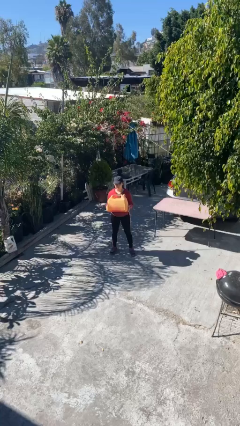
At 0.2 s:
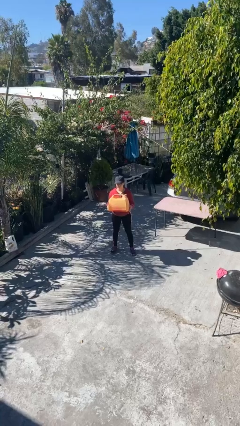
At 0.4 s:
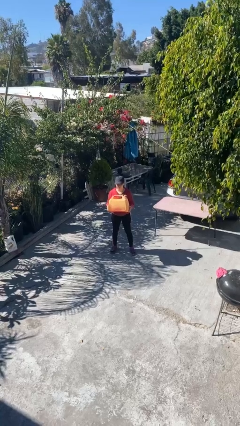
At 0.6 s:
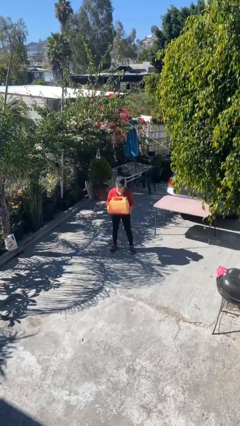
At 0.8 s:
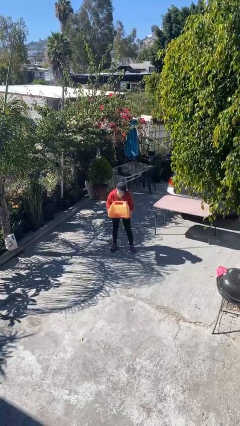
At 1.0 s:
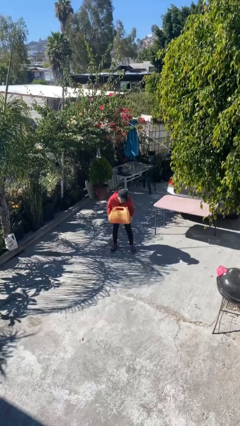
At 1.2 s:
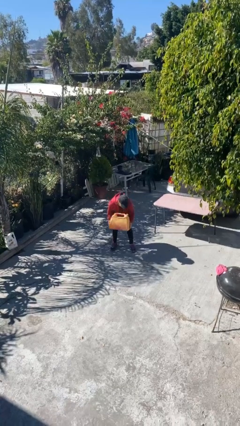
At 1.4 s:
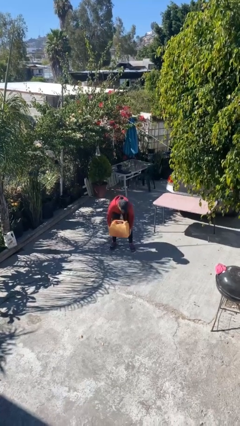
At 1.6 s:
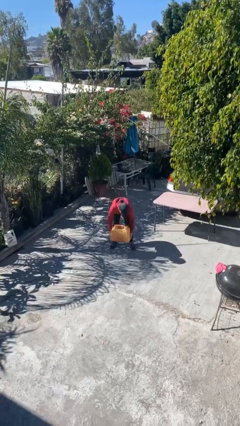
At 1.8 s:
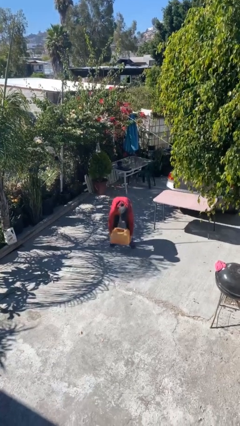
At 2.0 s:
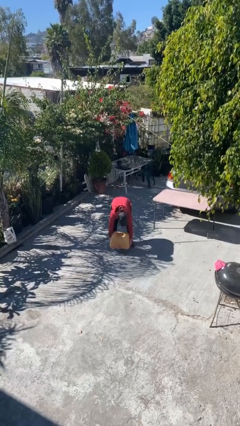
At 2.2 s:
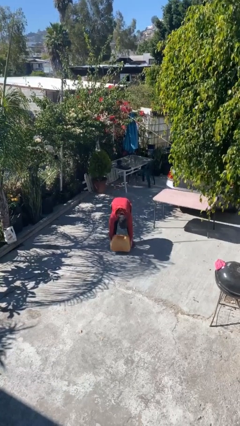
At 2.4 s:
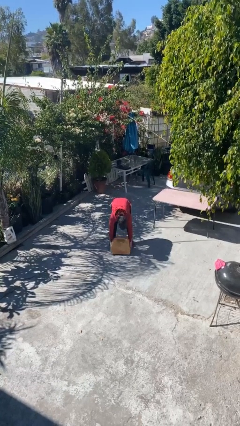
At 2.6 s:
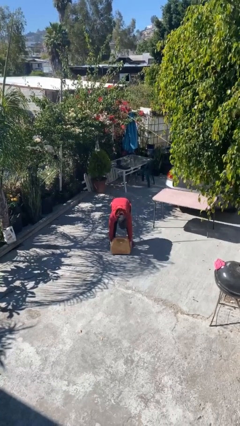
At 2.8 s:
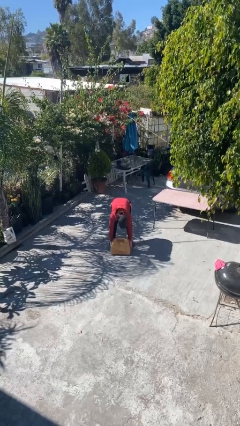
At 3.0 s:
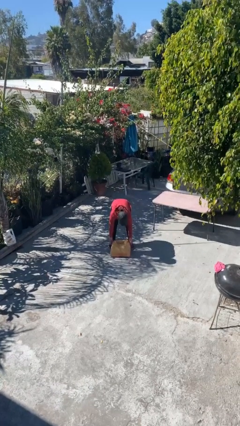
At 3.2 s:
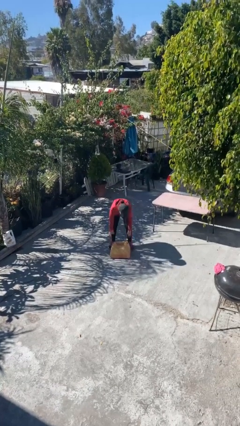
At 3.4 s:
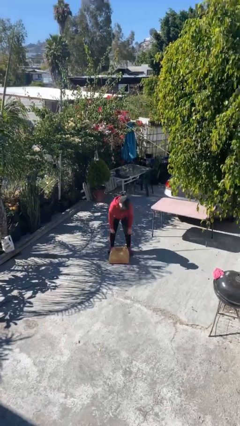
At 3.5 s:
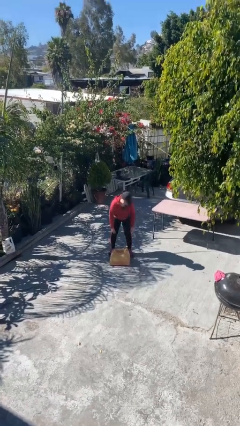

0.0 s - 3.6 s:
person puts down object on floor

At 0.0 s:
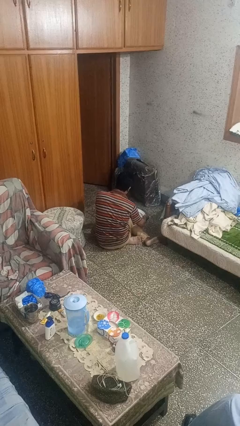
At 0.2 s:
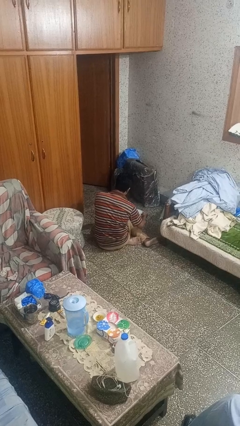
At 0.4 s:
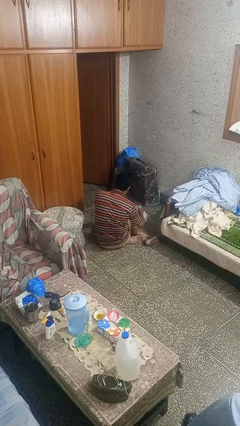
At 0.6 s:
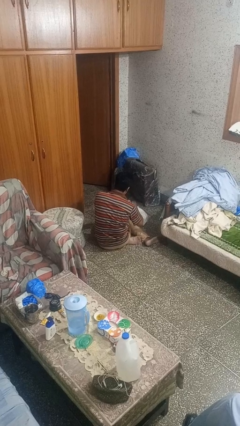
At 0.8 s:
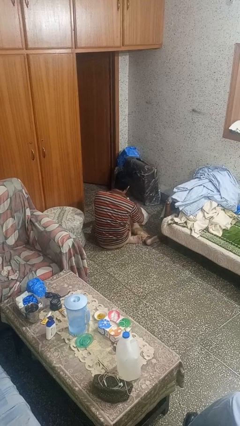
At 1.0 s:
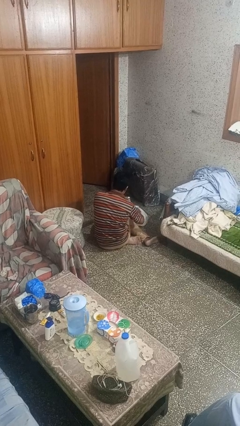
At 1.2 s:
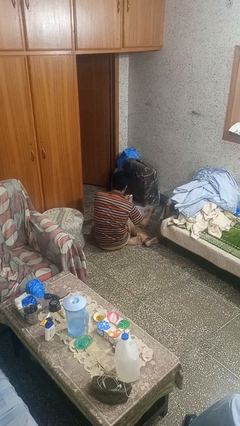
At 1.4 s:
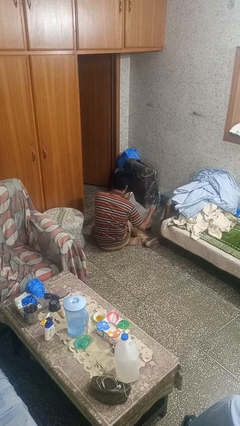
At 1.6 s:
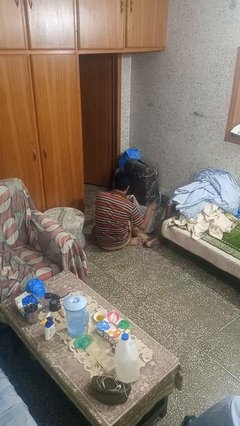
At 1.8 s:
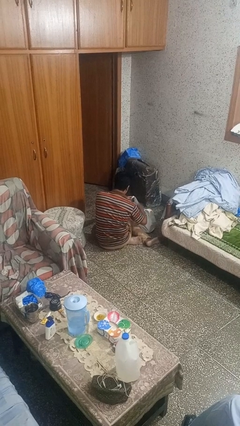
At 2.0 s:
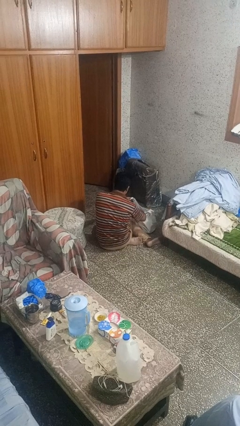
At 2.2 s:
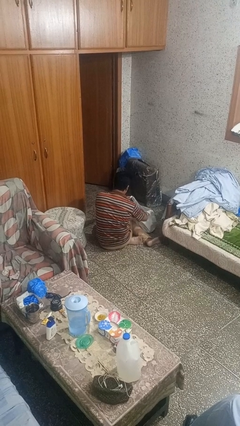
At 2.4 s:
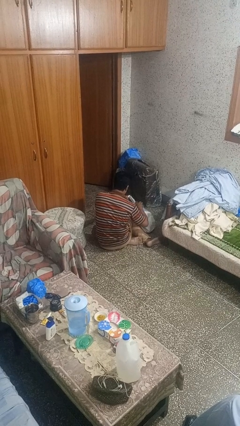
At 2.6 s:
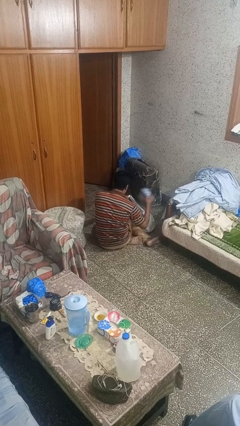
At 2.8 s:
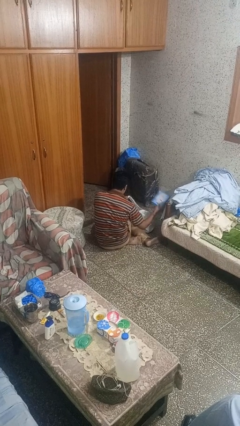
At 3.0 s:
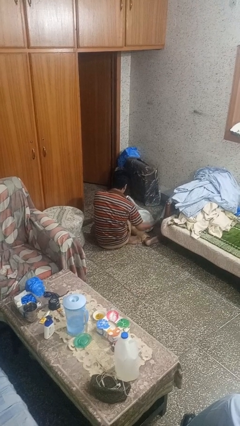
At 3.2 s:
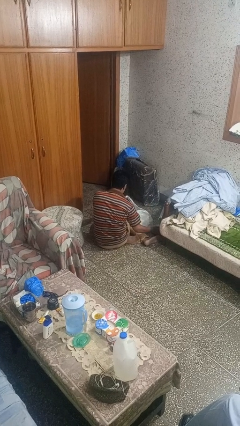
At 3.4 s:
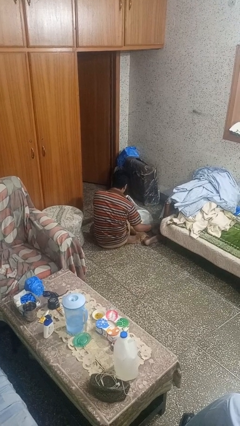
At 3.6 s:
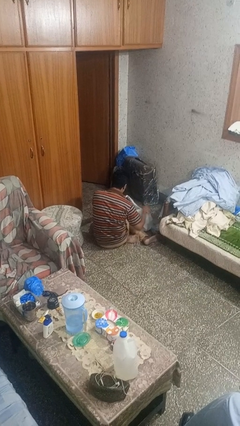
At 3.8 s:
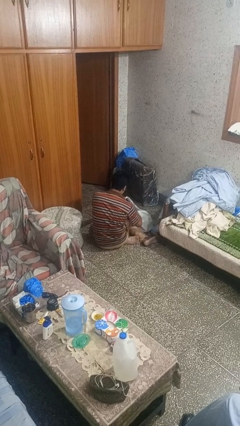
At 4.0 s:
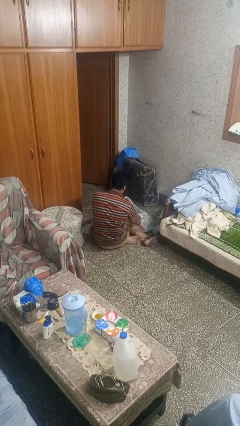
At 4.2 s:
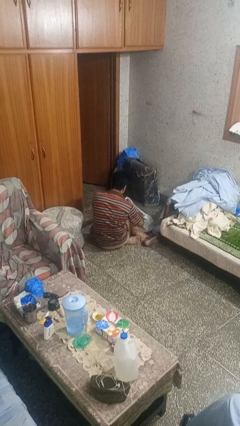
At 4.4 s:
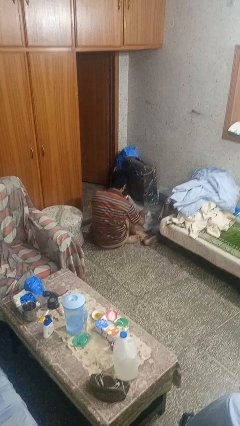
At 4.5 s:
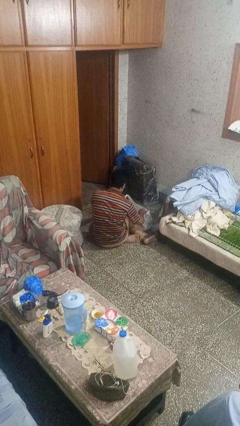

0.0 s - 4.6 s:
person takes object from bag

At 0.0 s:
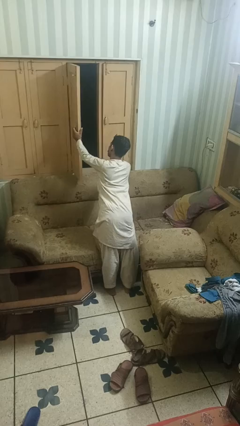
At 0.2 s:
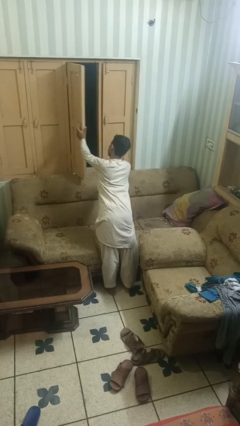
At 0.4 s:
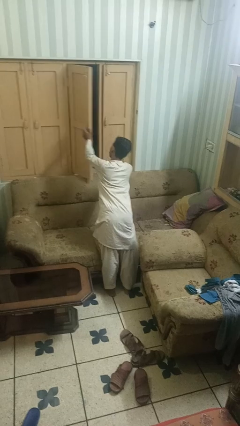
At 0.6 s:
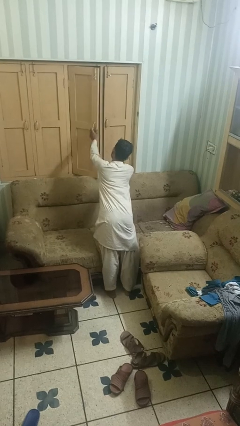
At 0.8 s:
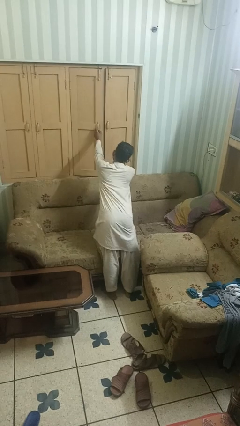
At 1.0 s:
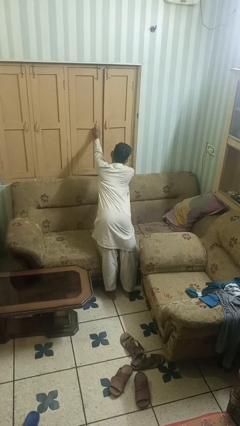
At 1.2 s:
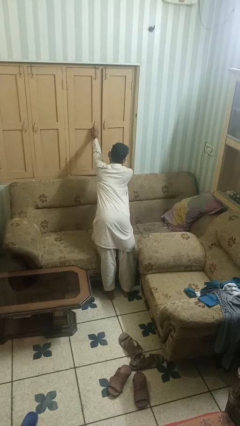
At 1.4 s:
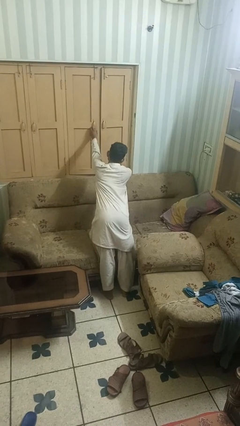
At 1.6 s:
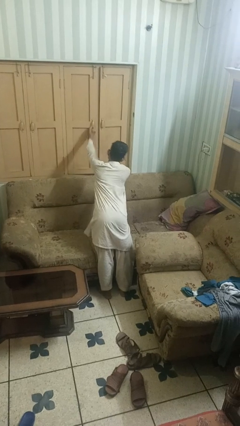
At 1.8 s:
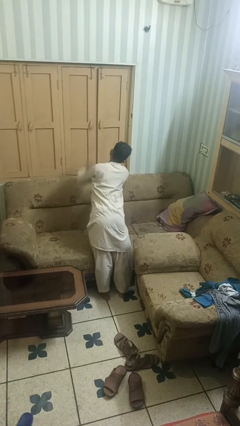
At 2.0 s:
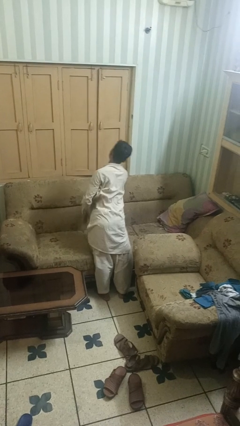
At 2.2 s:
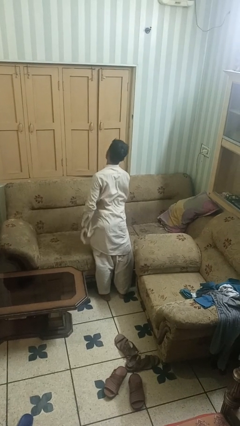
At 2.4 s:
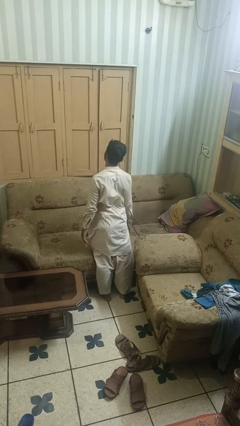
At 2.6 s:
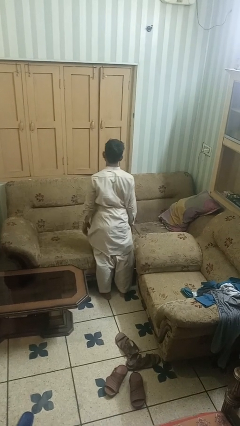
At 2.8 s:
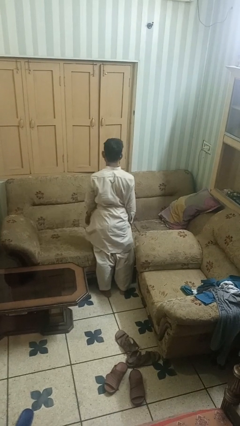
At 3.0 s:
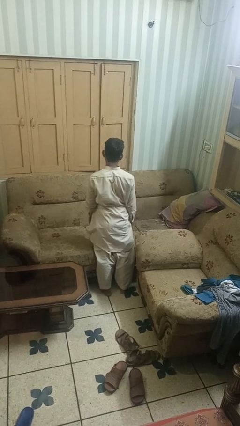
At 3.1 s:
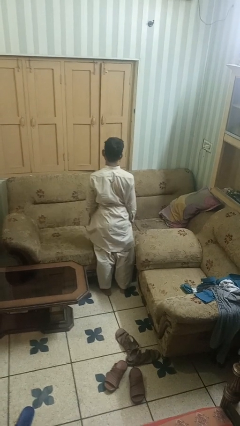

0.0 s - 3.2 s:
person closes home window

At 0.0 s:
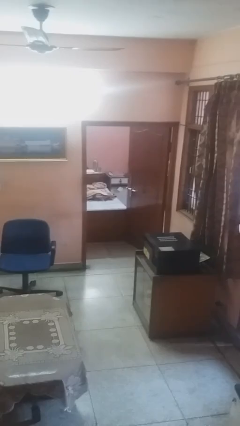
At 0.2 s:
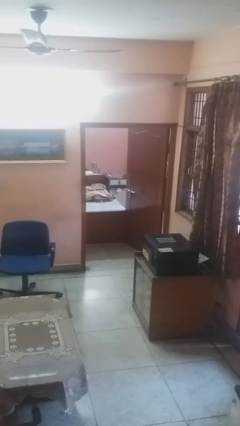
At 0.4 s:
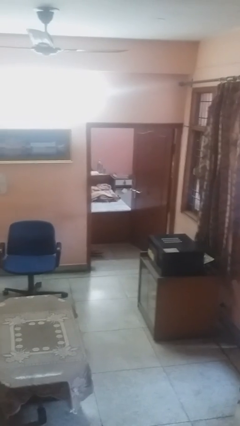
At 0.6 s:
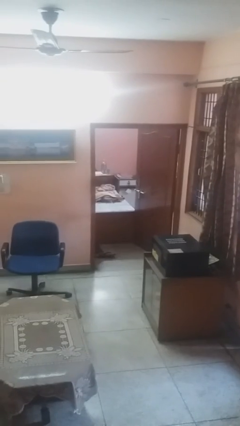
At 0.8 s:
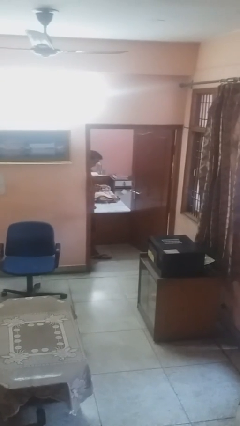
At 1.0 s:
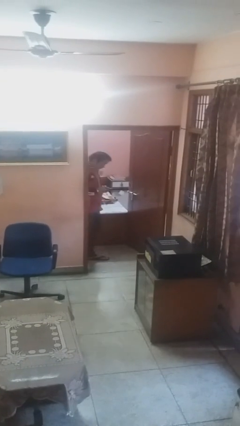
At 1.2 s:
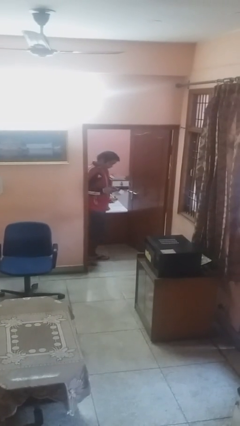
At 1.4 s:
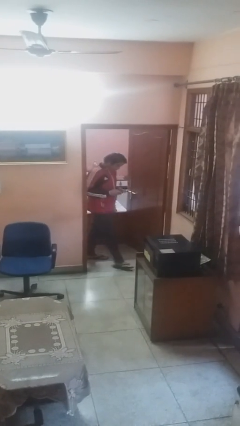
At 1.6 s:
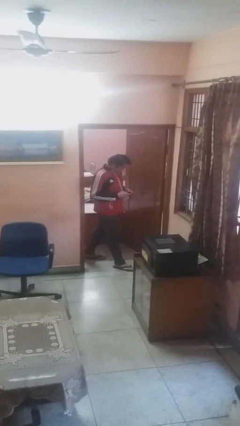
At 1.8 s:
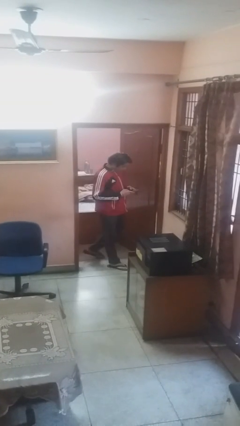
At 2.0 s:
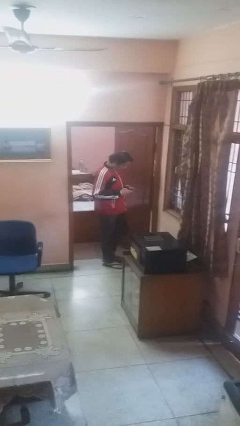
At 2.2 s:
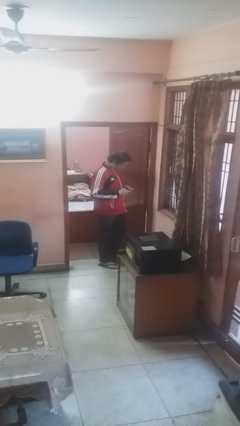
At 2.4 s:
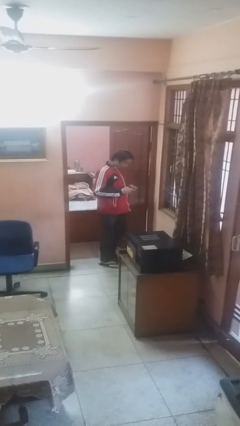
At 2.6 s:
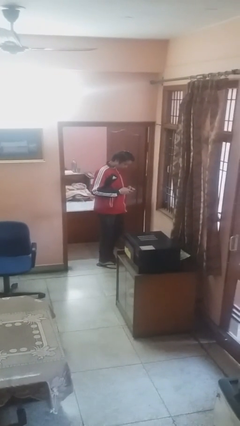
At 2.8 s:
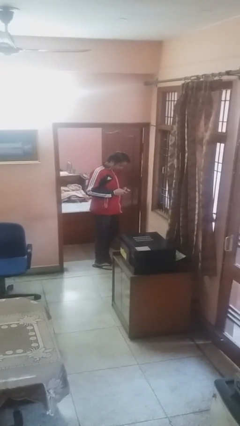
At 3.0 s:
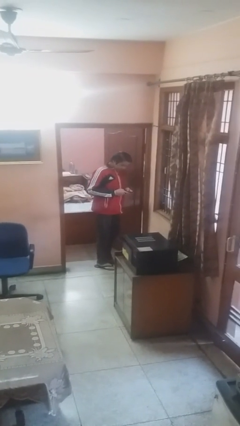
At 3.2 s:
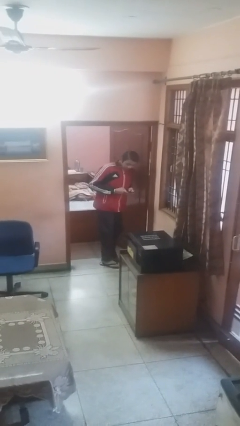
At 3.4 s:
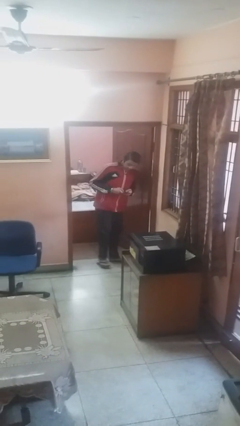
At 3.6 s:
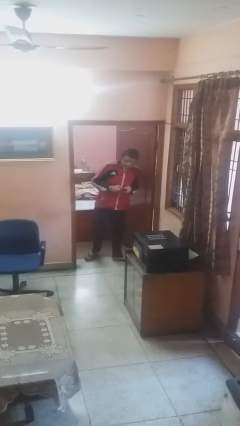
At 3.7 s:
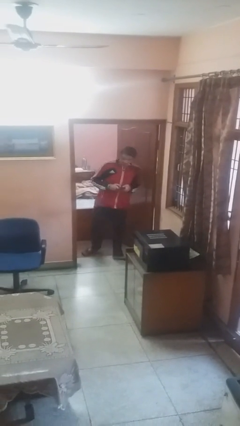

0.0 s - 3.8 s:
person enters scene through structure

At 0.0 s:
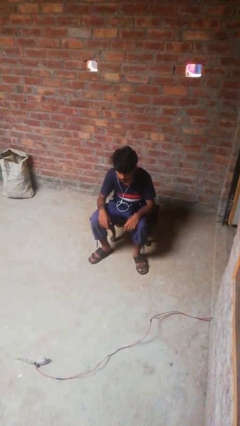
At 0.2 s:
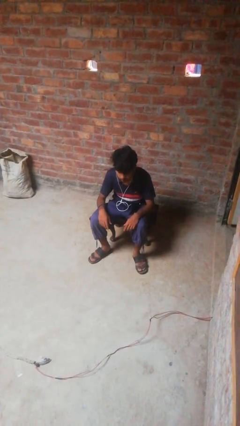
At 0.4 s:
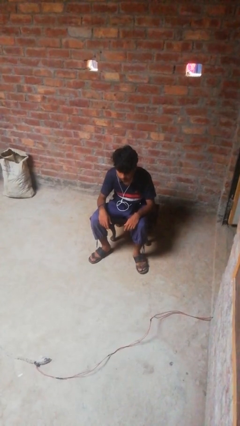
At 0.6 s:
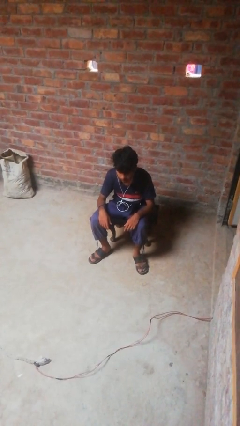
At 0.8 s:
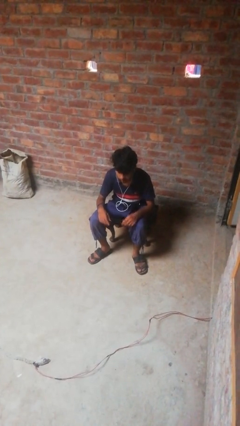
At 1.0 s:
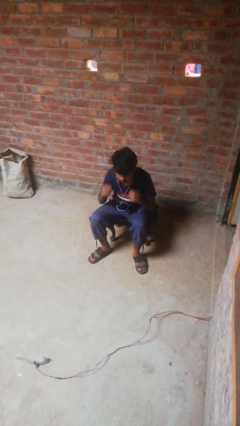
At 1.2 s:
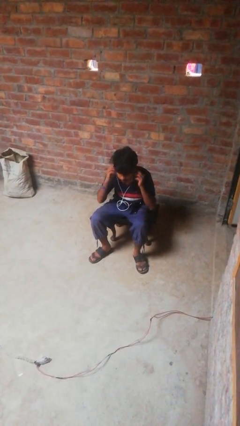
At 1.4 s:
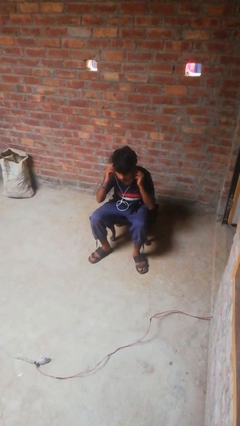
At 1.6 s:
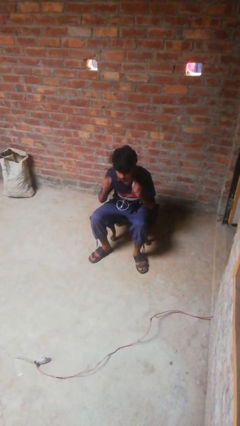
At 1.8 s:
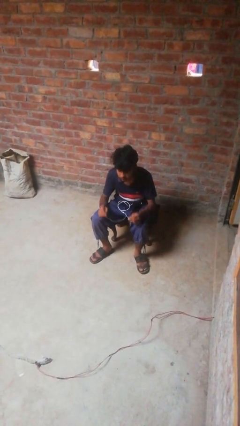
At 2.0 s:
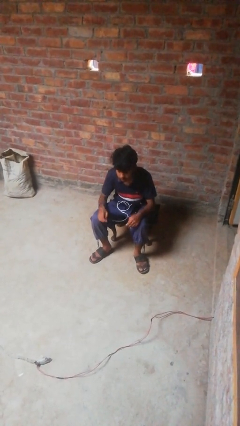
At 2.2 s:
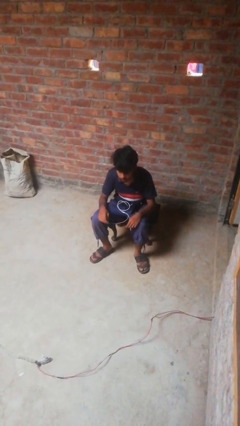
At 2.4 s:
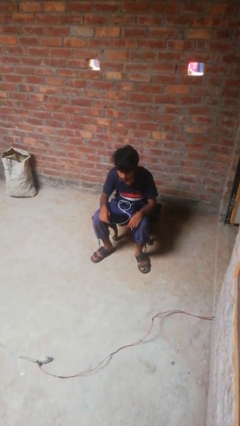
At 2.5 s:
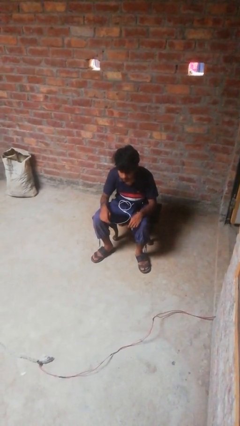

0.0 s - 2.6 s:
person takes off headphones
